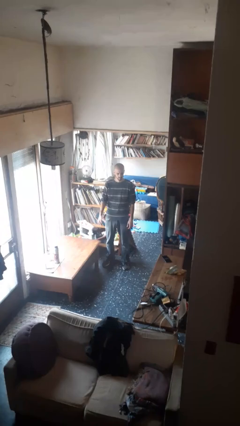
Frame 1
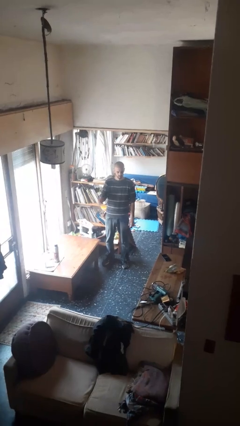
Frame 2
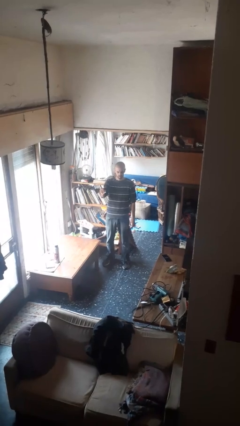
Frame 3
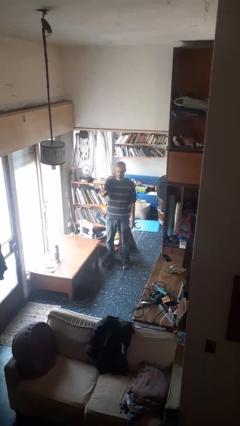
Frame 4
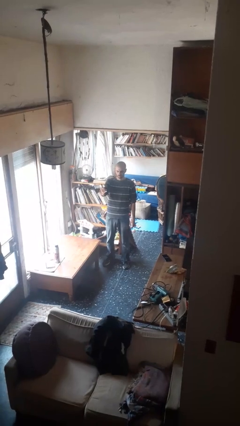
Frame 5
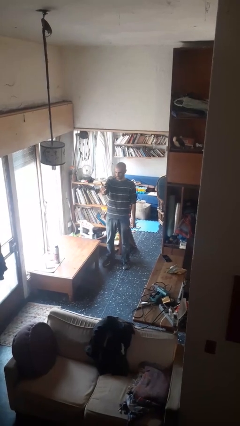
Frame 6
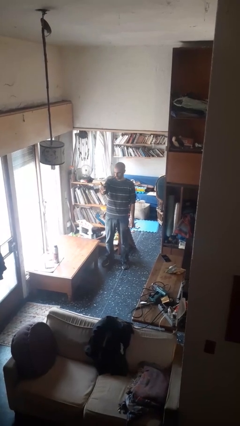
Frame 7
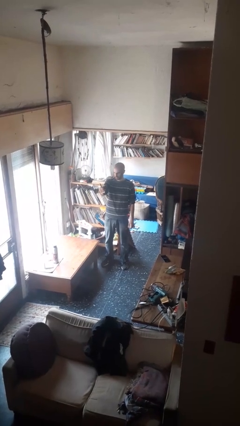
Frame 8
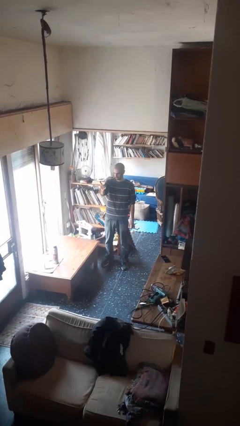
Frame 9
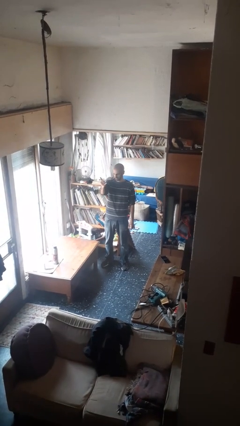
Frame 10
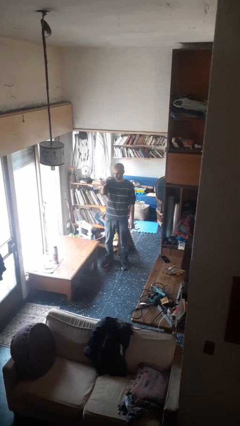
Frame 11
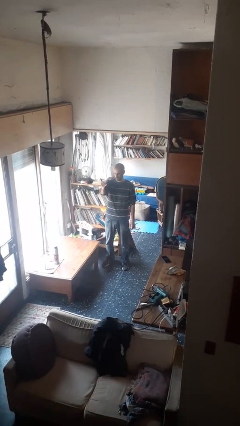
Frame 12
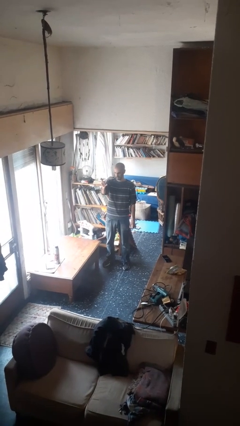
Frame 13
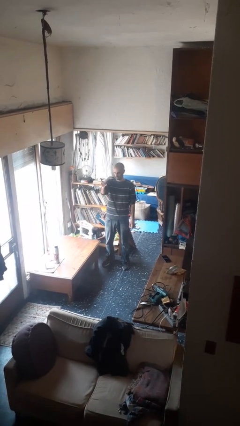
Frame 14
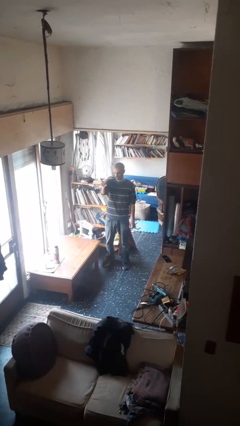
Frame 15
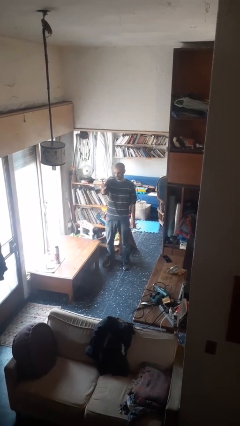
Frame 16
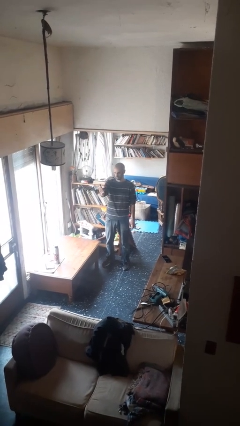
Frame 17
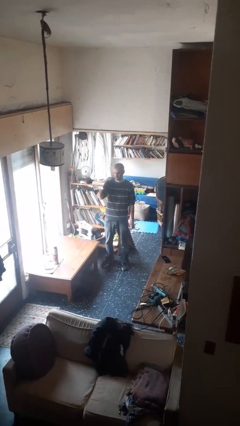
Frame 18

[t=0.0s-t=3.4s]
person gestures hang loose

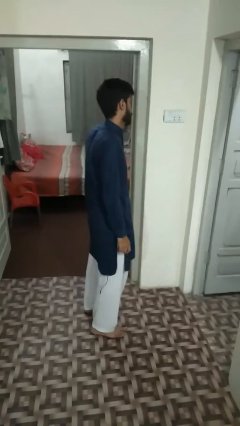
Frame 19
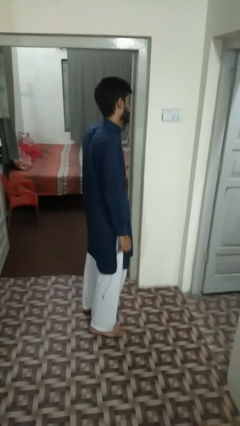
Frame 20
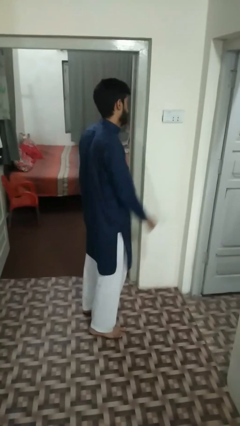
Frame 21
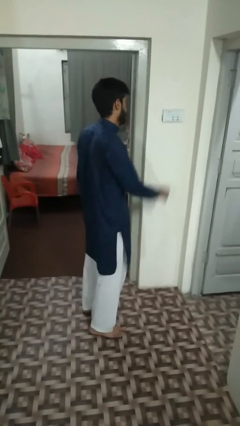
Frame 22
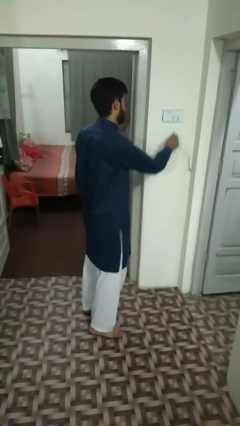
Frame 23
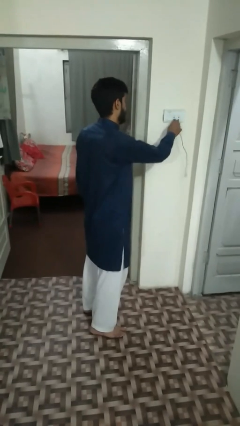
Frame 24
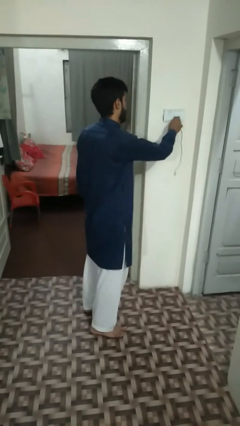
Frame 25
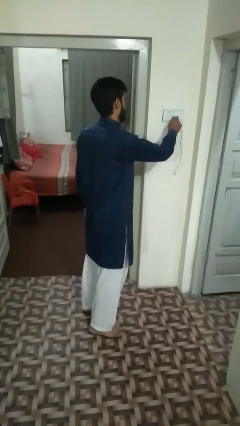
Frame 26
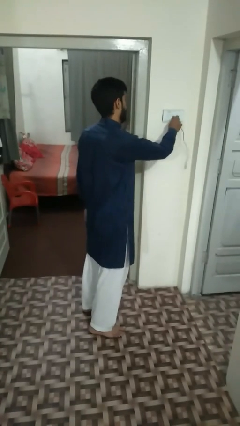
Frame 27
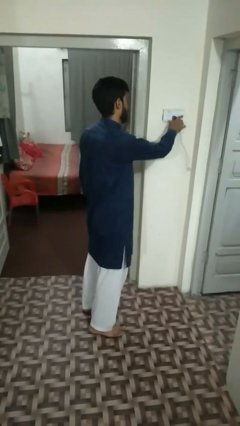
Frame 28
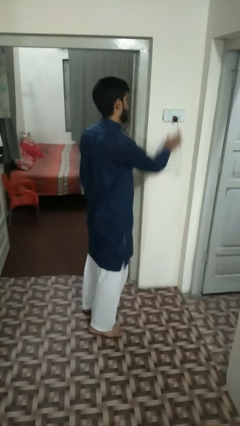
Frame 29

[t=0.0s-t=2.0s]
person plugs into electrical socket

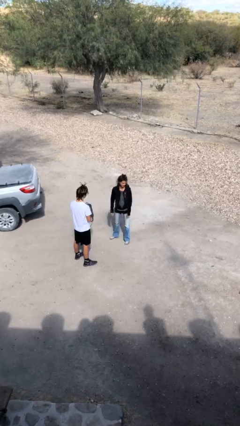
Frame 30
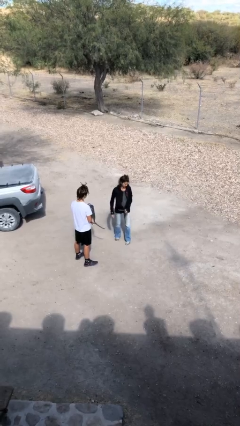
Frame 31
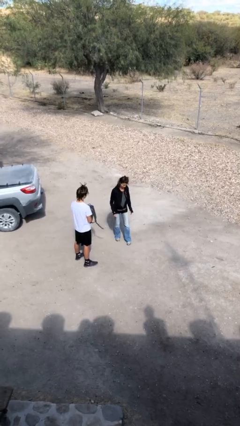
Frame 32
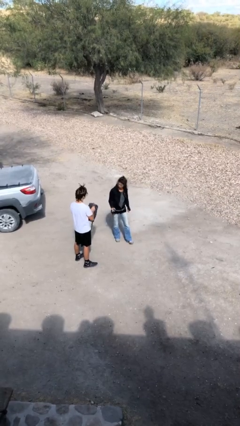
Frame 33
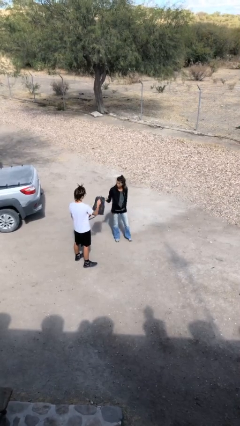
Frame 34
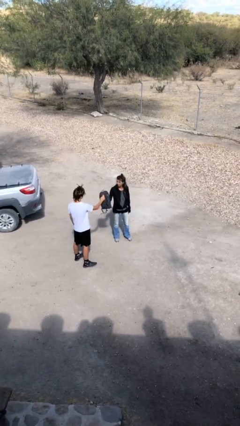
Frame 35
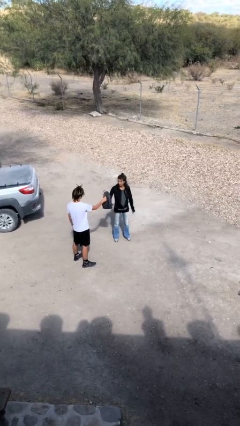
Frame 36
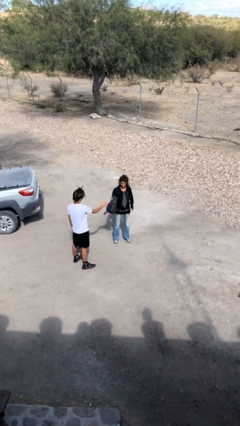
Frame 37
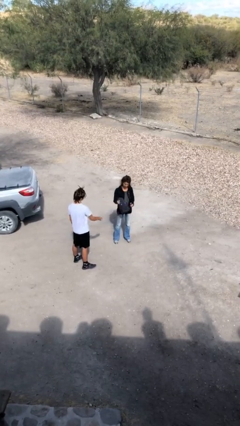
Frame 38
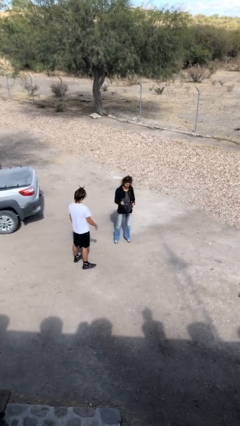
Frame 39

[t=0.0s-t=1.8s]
person transfers object to person

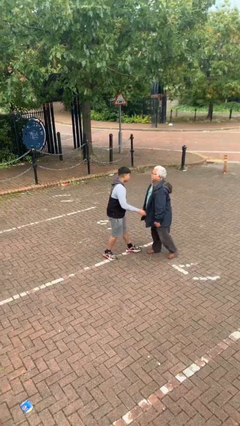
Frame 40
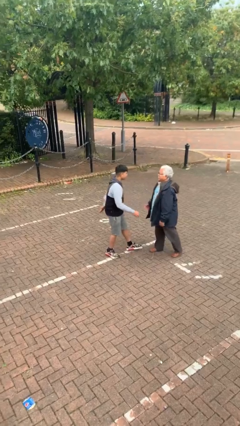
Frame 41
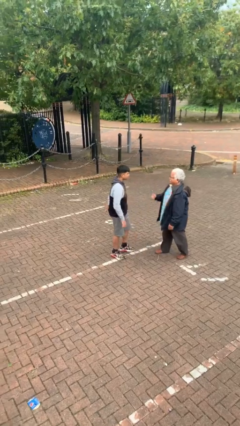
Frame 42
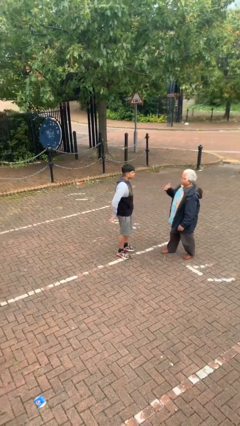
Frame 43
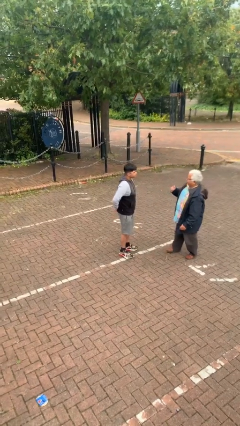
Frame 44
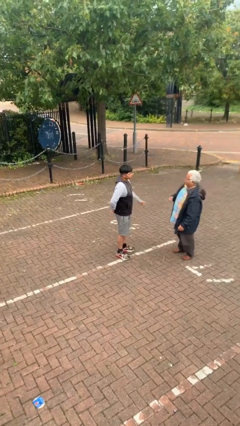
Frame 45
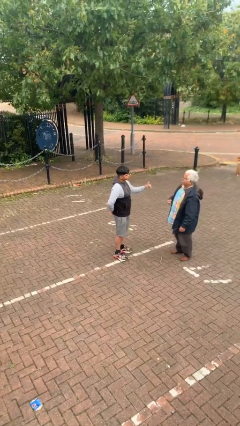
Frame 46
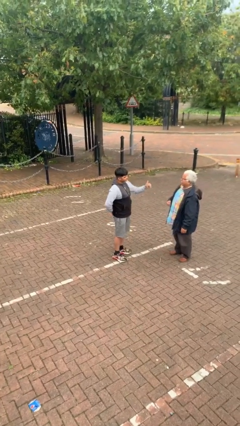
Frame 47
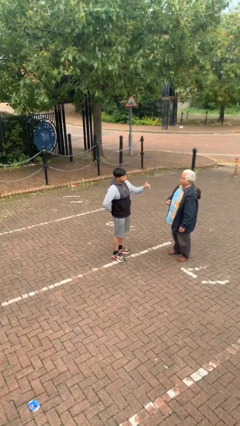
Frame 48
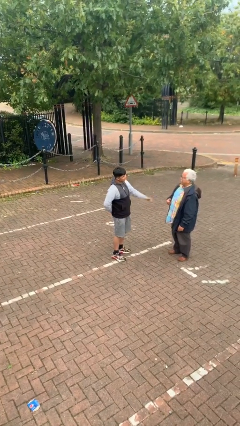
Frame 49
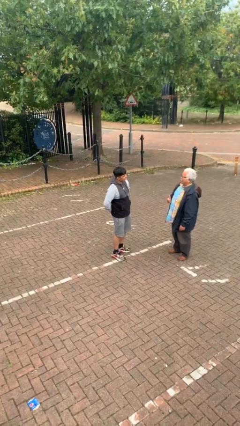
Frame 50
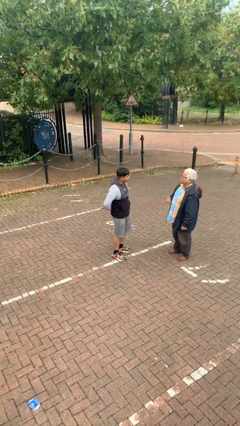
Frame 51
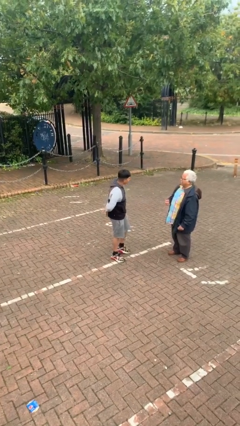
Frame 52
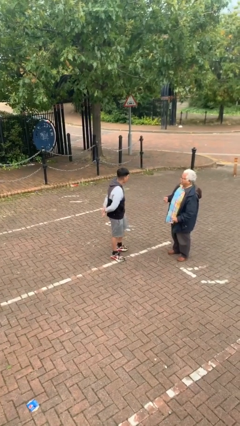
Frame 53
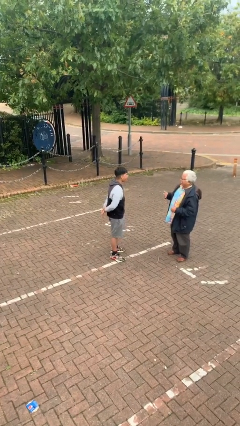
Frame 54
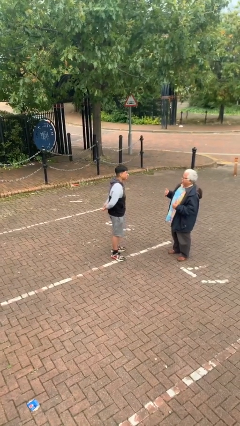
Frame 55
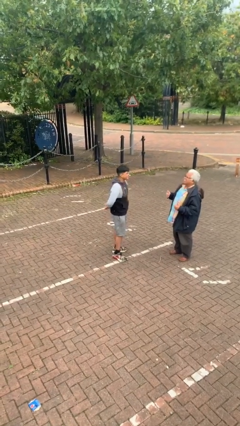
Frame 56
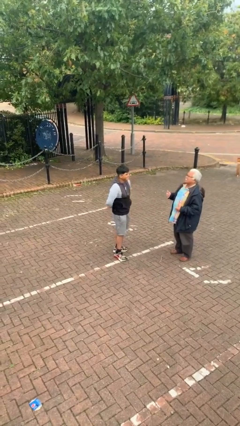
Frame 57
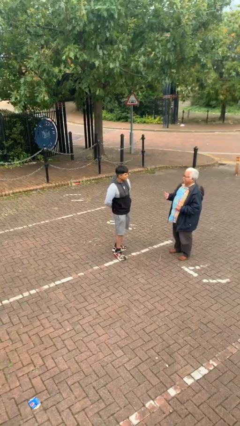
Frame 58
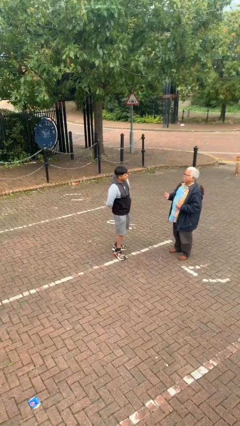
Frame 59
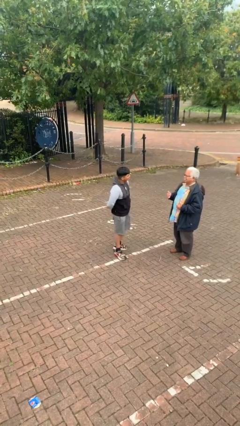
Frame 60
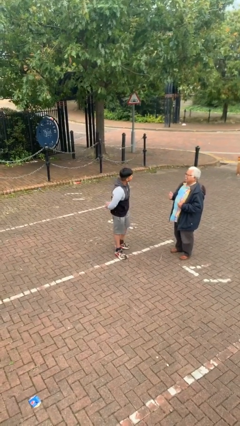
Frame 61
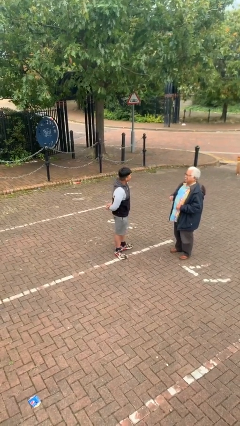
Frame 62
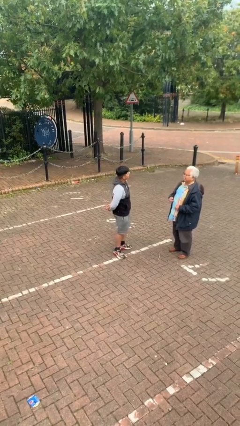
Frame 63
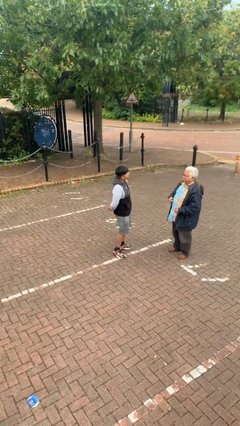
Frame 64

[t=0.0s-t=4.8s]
person talks to person

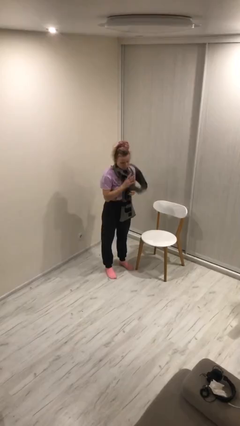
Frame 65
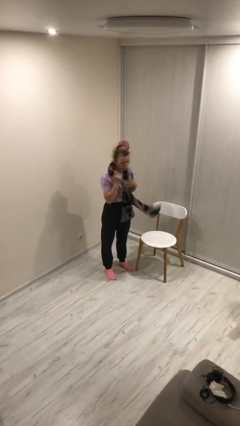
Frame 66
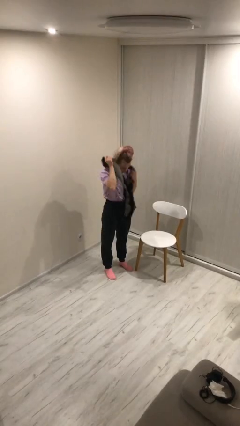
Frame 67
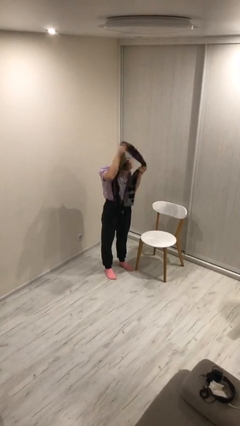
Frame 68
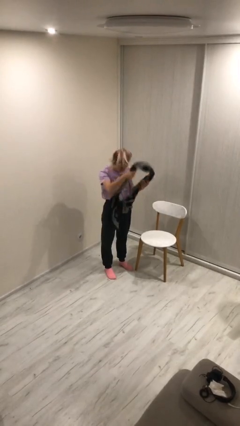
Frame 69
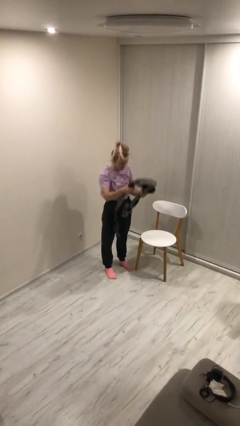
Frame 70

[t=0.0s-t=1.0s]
person takes off scarf

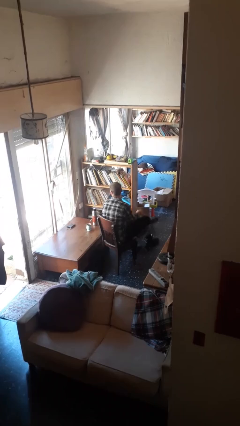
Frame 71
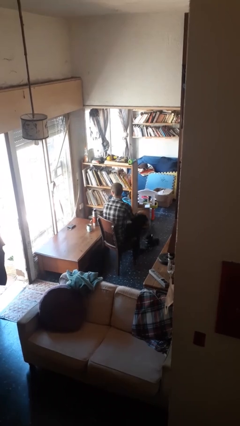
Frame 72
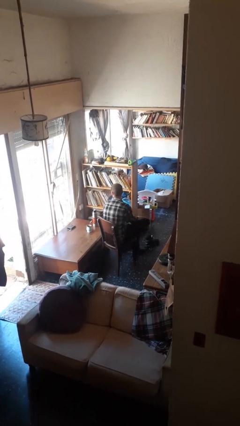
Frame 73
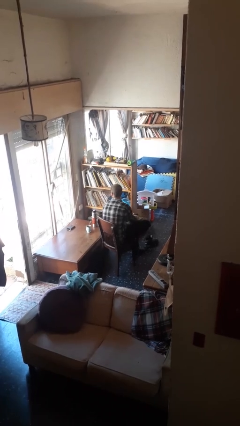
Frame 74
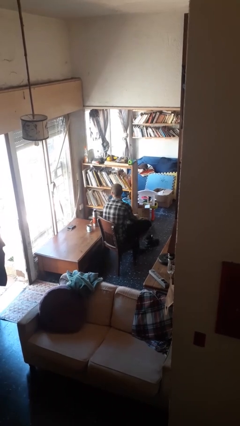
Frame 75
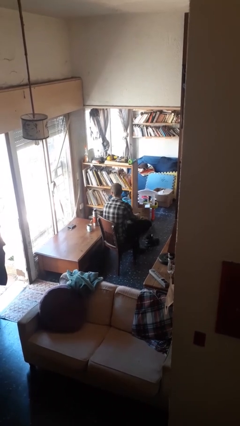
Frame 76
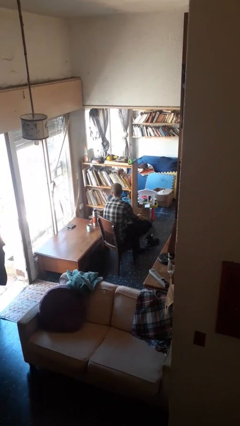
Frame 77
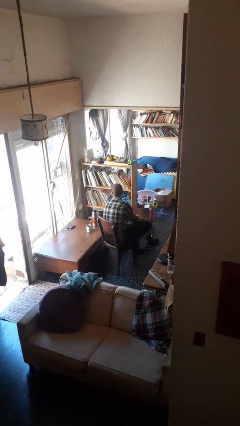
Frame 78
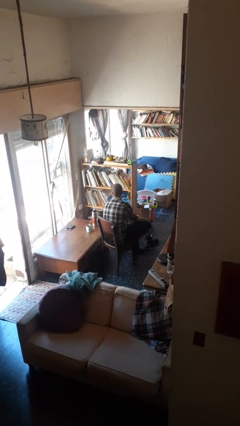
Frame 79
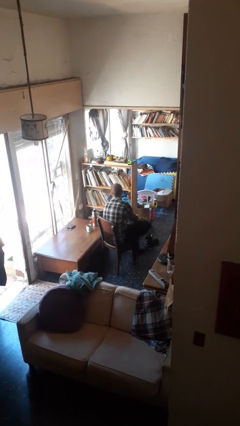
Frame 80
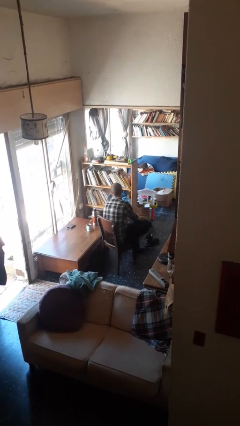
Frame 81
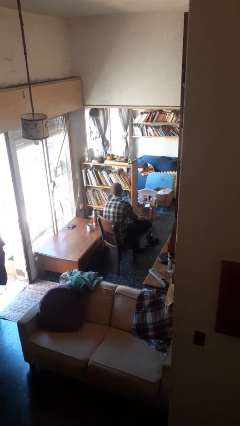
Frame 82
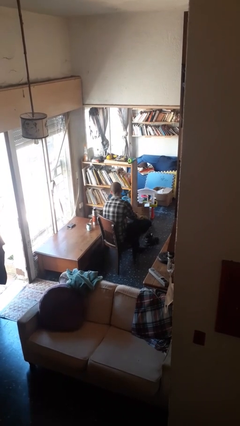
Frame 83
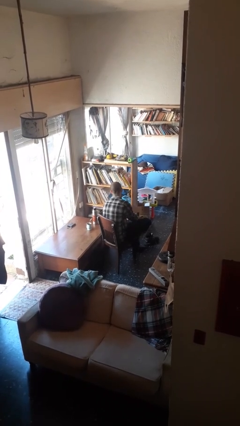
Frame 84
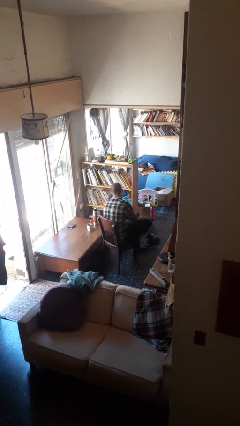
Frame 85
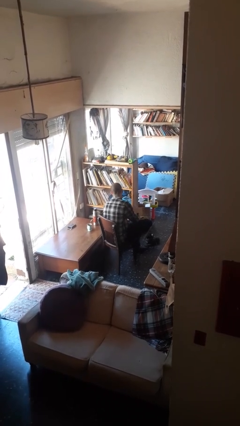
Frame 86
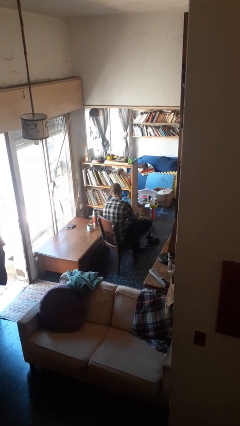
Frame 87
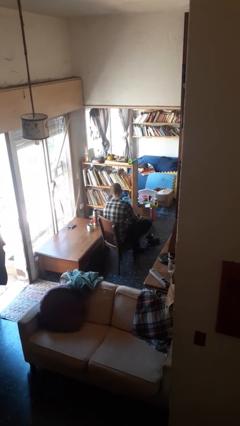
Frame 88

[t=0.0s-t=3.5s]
person rubs foot

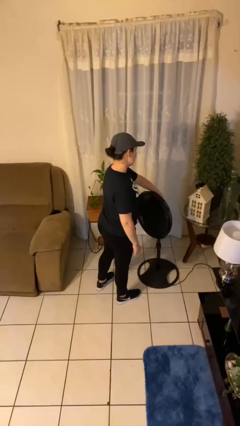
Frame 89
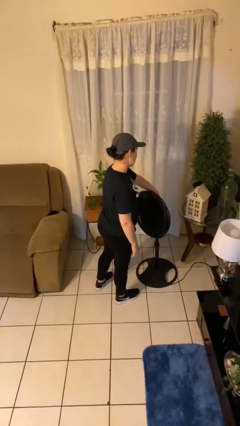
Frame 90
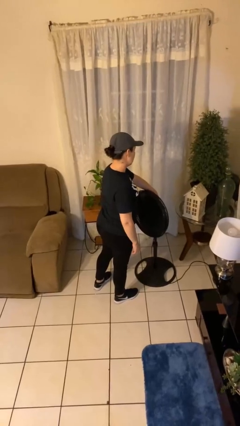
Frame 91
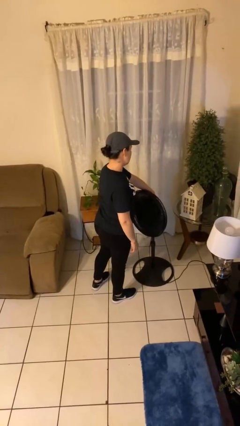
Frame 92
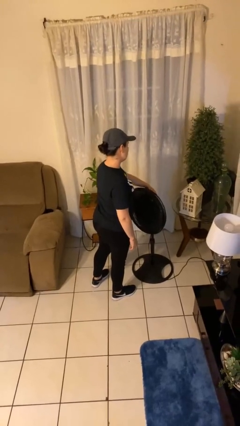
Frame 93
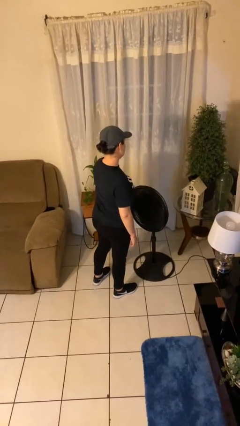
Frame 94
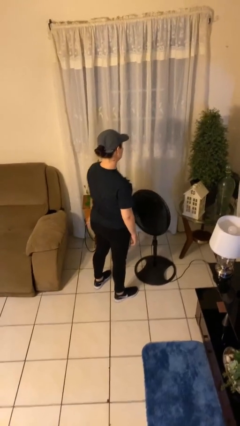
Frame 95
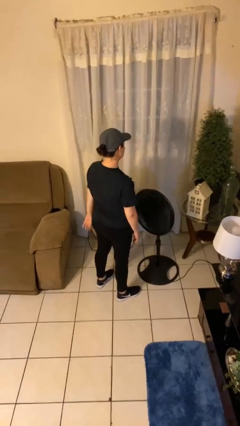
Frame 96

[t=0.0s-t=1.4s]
person turns on fan
